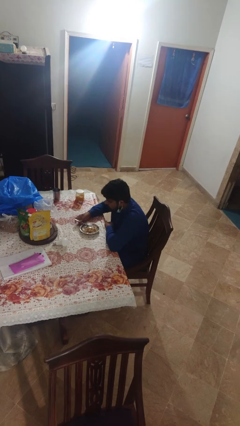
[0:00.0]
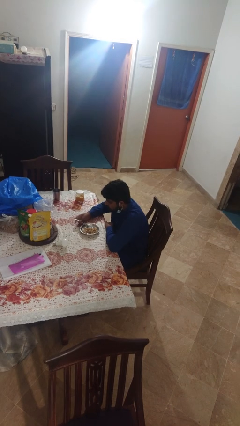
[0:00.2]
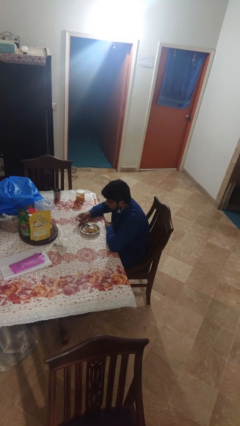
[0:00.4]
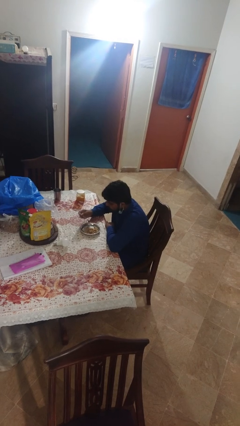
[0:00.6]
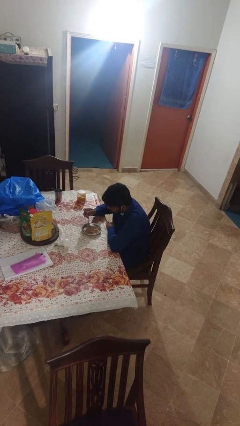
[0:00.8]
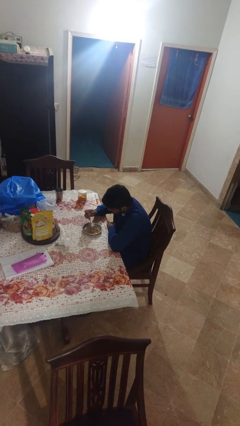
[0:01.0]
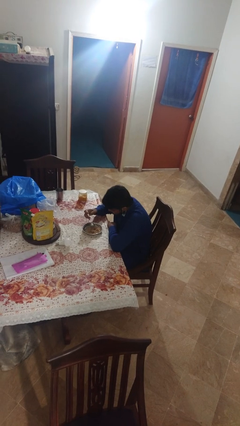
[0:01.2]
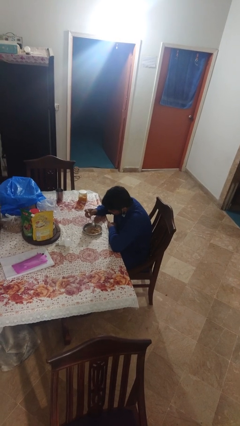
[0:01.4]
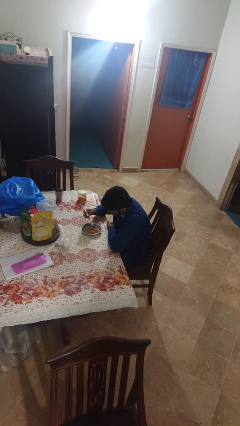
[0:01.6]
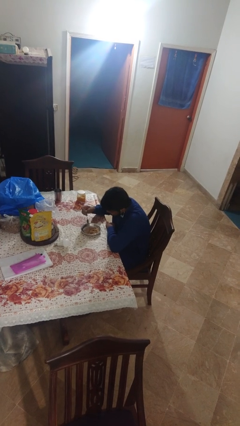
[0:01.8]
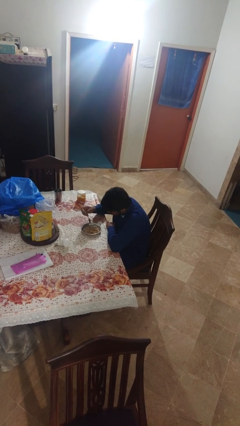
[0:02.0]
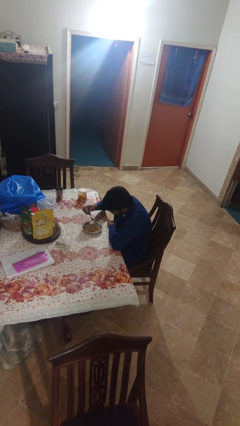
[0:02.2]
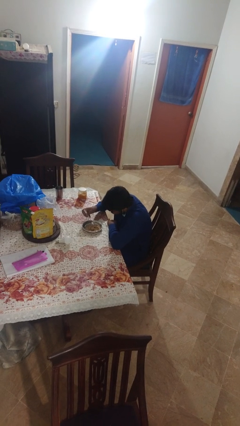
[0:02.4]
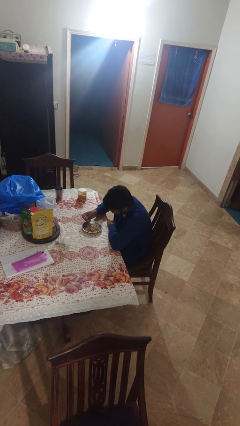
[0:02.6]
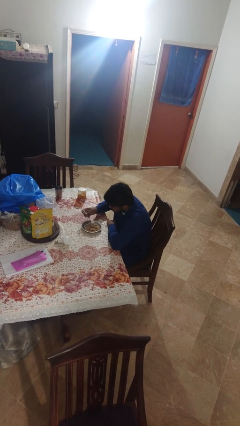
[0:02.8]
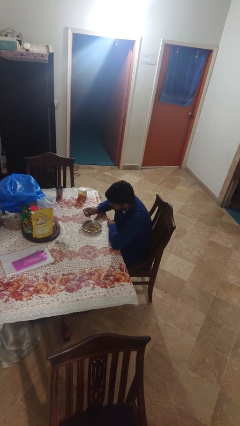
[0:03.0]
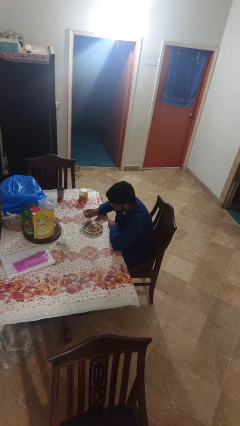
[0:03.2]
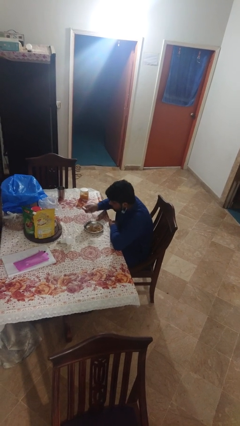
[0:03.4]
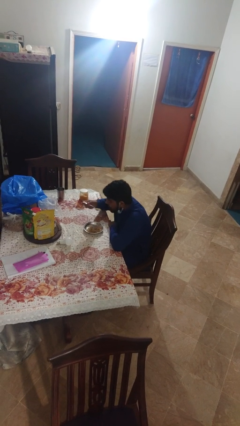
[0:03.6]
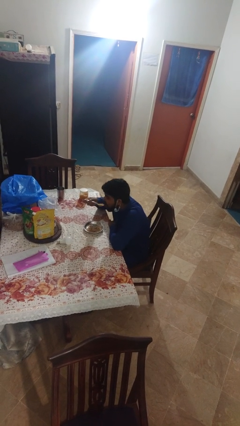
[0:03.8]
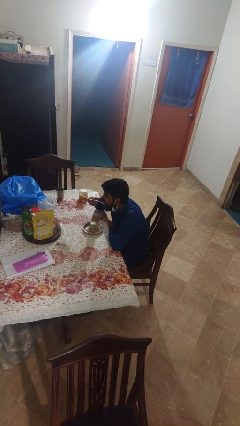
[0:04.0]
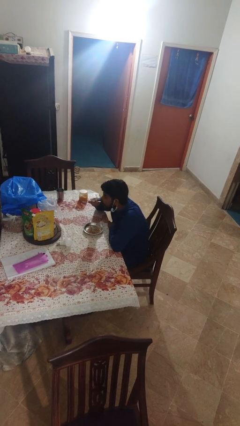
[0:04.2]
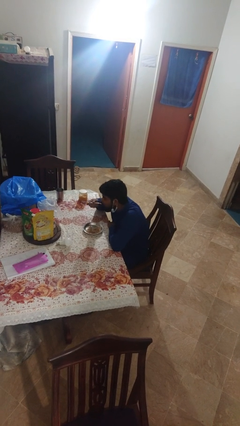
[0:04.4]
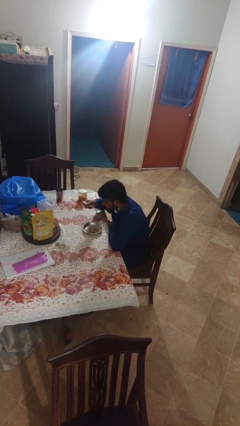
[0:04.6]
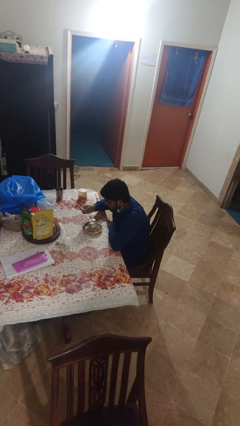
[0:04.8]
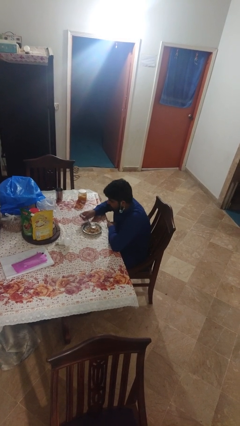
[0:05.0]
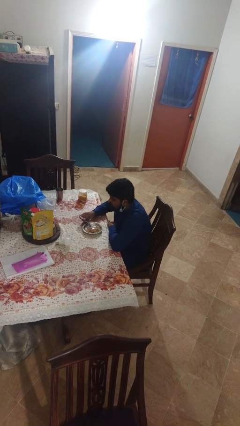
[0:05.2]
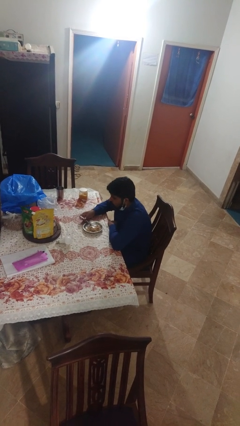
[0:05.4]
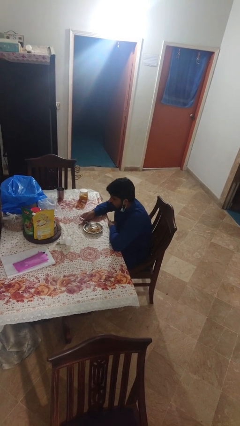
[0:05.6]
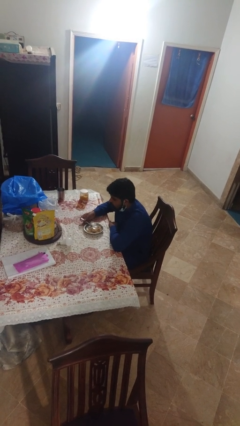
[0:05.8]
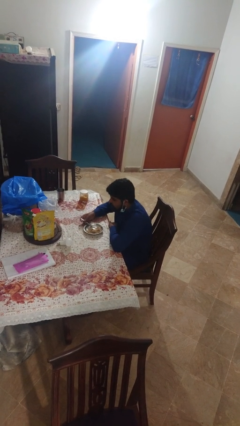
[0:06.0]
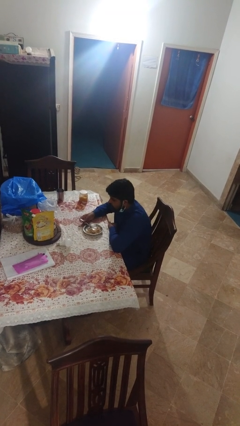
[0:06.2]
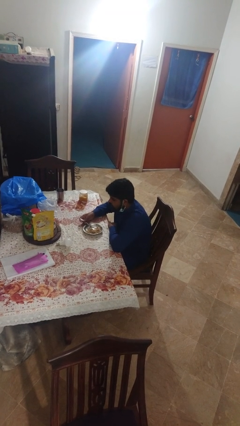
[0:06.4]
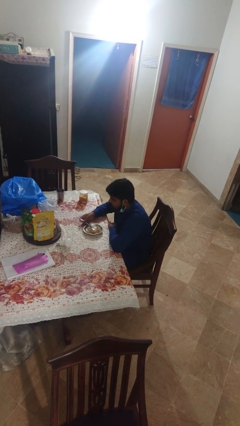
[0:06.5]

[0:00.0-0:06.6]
person eats with utensil

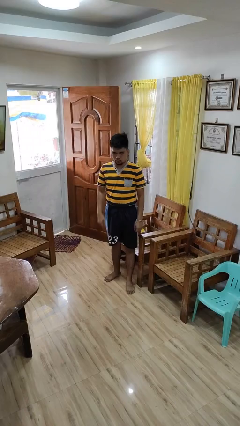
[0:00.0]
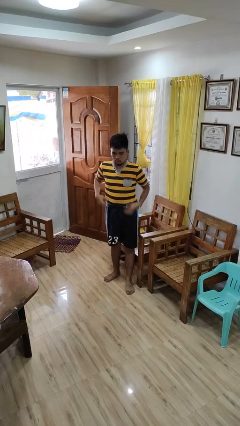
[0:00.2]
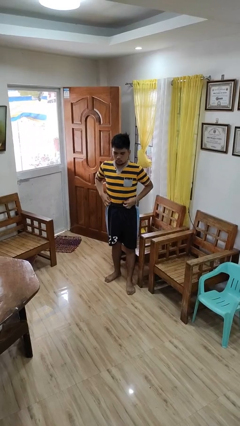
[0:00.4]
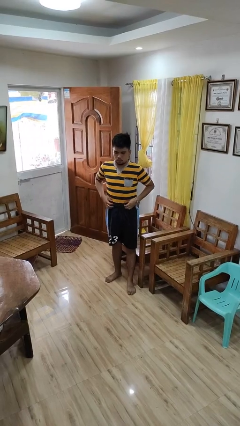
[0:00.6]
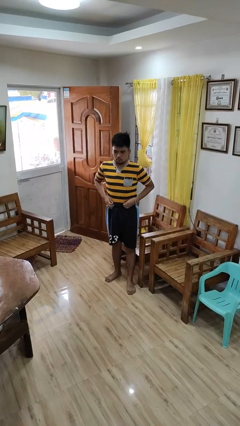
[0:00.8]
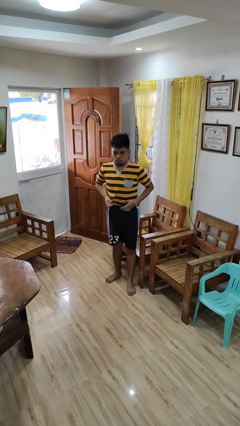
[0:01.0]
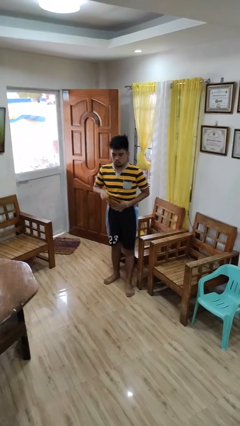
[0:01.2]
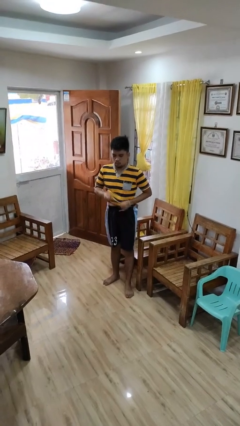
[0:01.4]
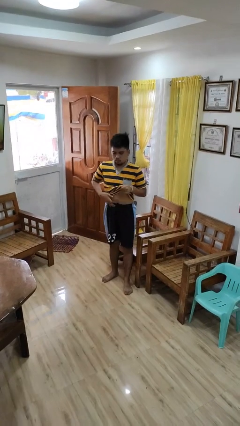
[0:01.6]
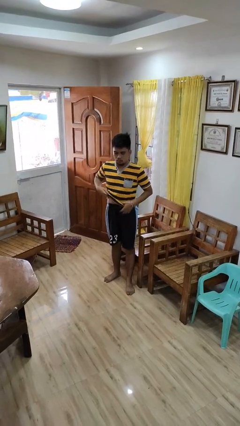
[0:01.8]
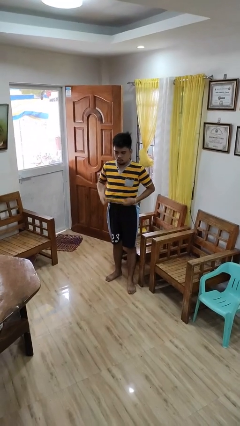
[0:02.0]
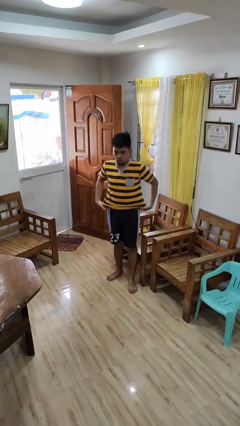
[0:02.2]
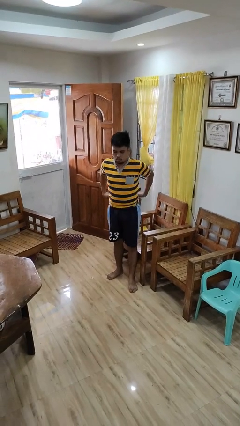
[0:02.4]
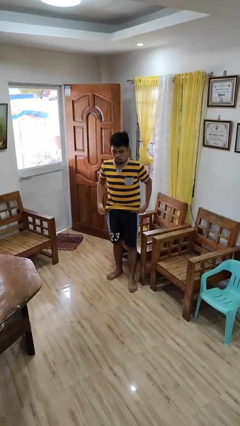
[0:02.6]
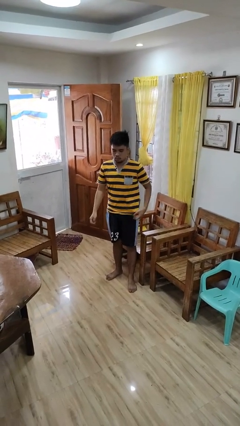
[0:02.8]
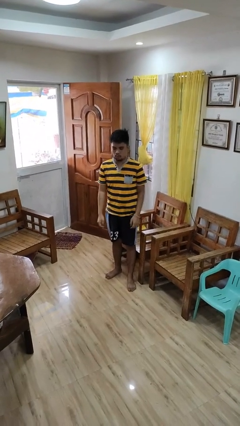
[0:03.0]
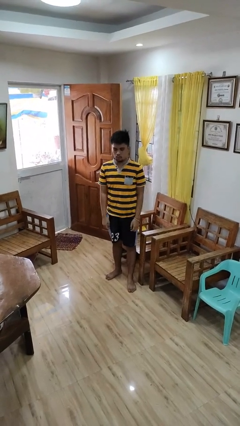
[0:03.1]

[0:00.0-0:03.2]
person untucks shirt

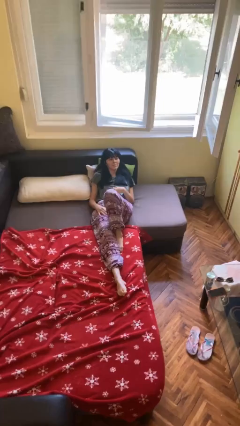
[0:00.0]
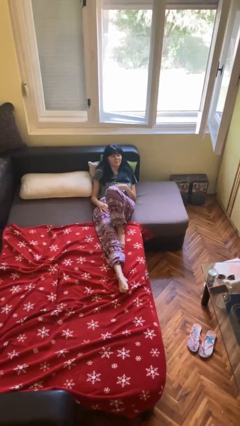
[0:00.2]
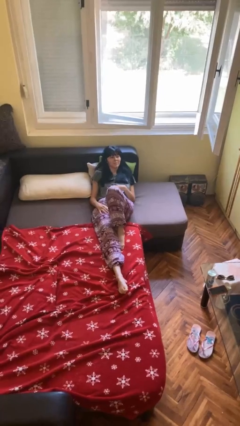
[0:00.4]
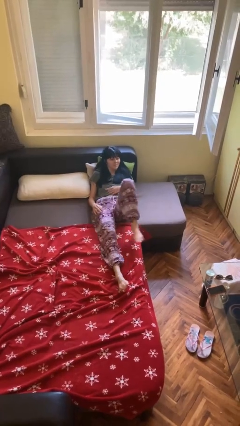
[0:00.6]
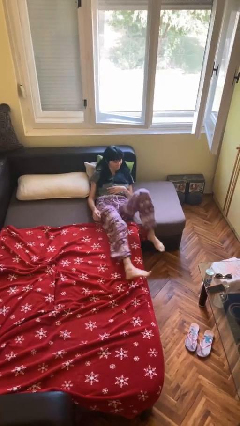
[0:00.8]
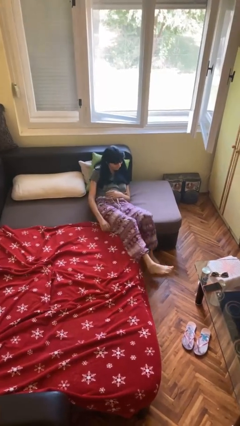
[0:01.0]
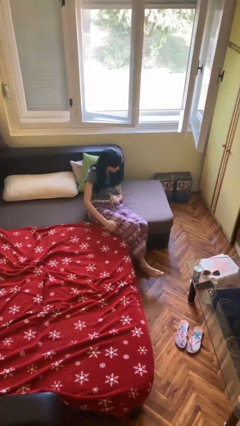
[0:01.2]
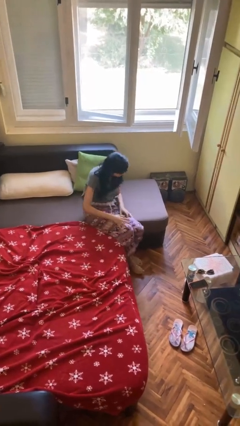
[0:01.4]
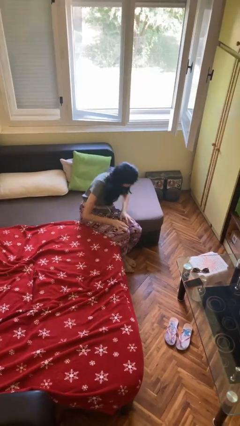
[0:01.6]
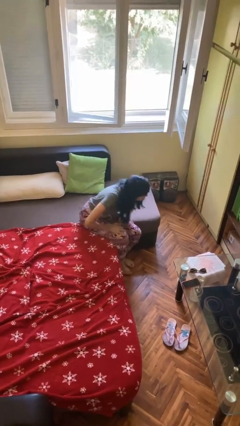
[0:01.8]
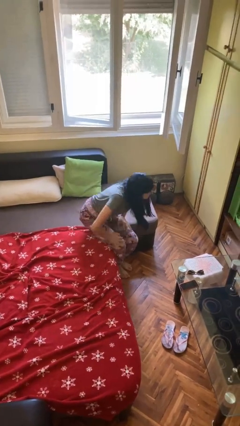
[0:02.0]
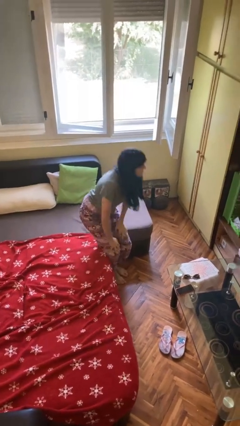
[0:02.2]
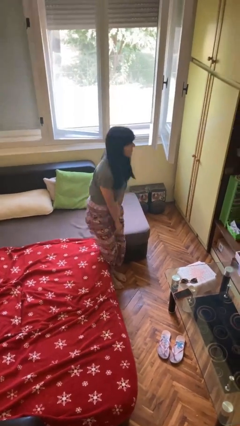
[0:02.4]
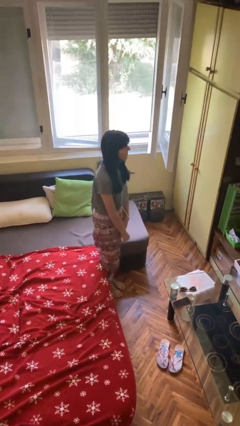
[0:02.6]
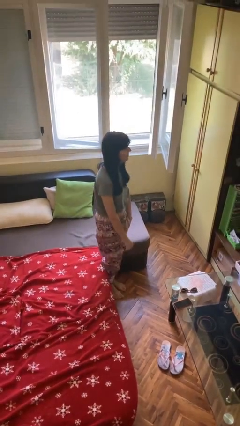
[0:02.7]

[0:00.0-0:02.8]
person stands up

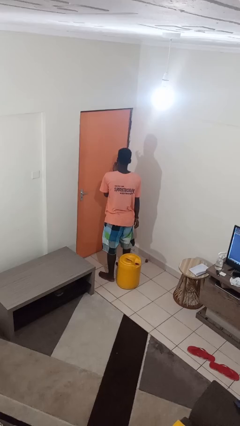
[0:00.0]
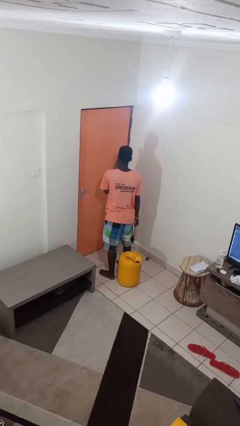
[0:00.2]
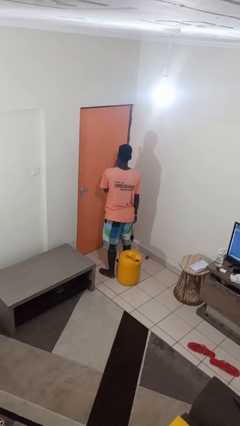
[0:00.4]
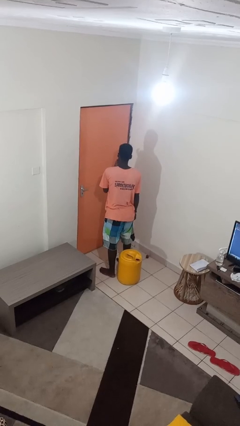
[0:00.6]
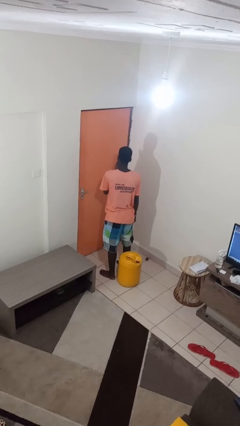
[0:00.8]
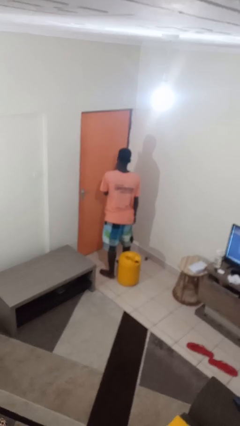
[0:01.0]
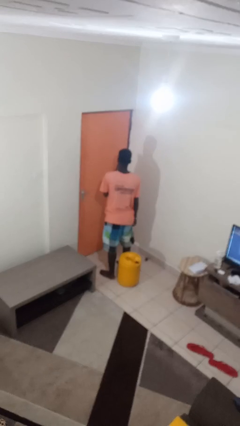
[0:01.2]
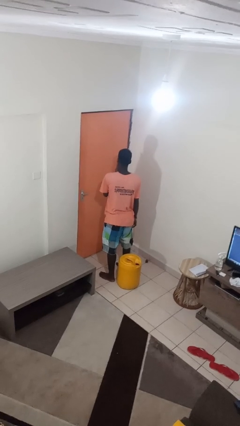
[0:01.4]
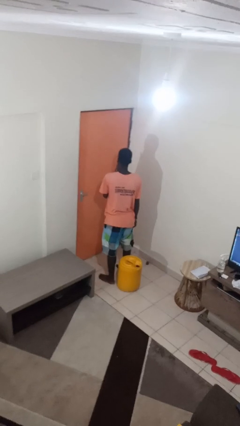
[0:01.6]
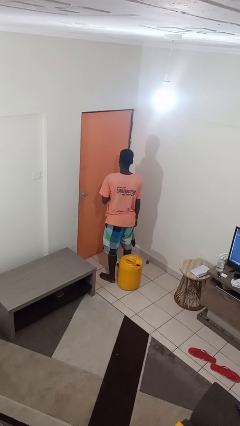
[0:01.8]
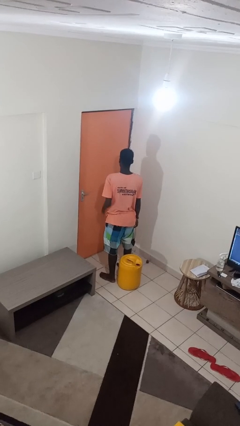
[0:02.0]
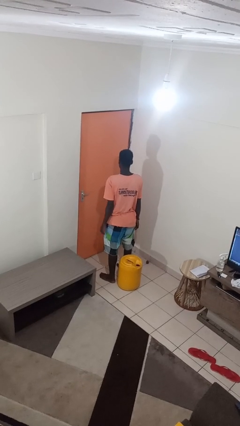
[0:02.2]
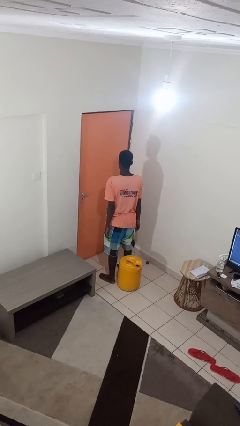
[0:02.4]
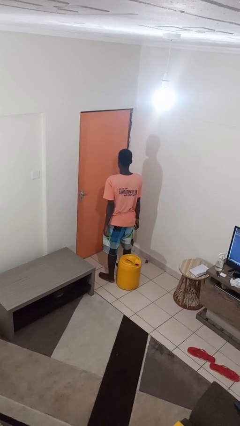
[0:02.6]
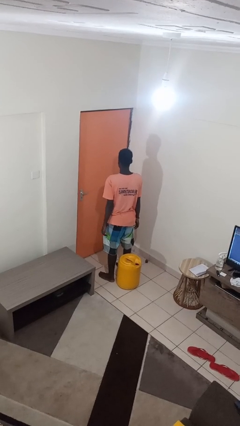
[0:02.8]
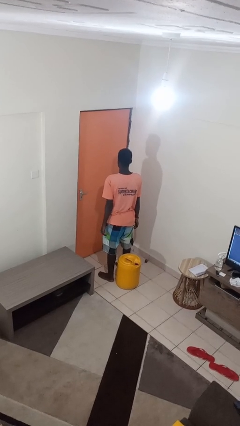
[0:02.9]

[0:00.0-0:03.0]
person licks fingers

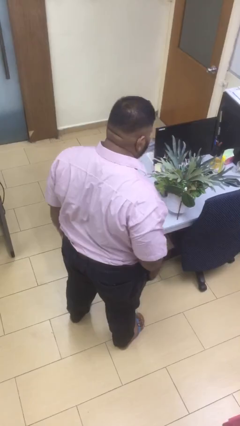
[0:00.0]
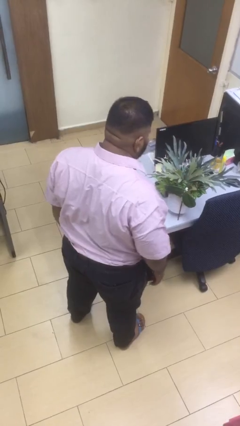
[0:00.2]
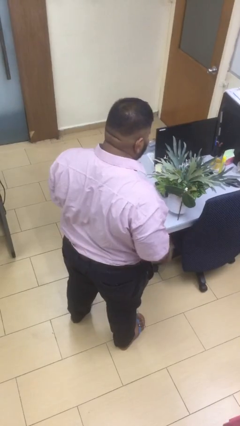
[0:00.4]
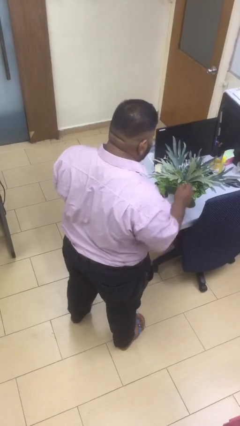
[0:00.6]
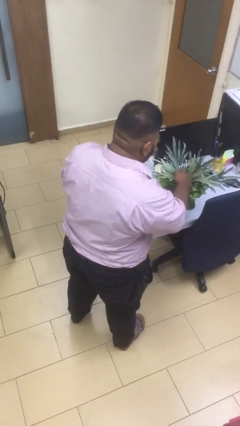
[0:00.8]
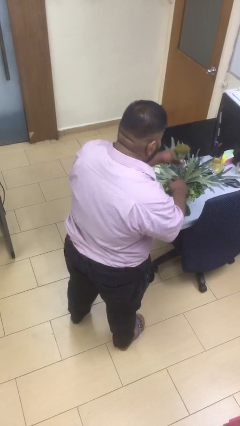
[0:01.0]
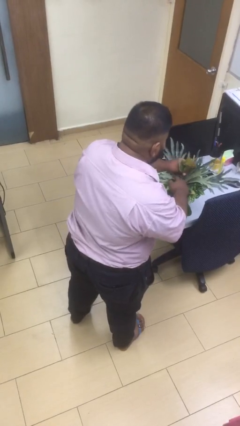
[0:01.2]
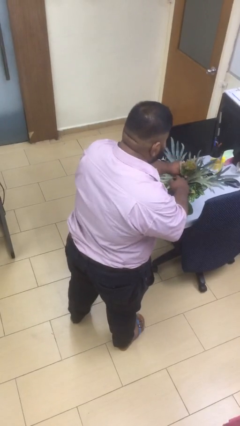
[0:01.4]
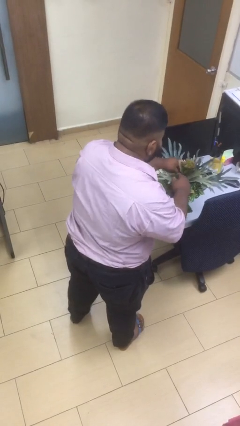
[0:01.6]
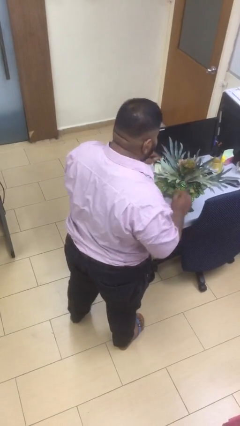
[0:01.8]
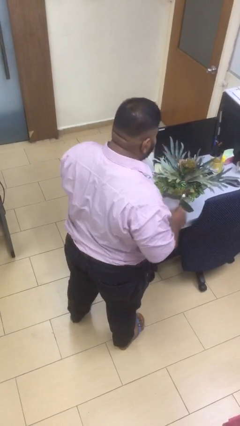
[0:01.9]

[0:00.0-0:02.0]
person arranges flowers in vase
